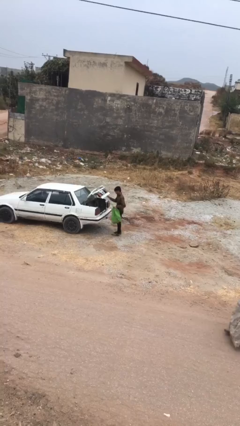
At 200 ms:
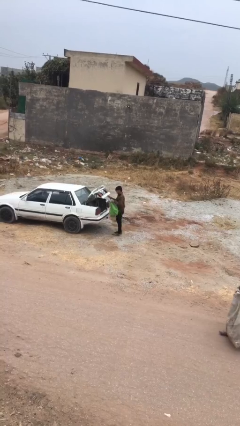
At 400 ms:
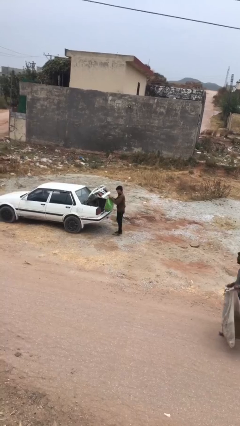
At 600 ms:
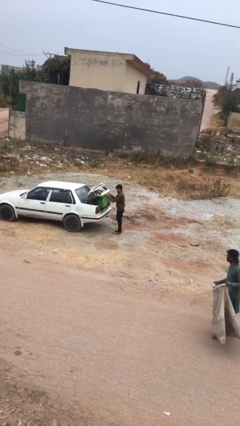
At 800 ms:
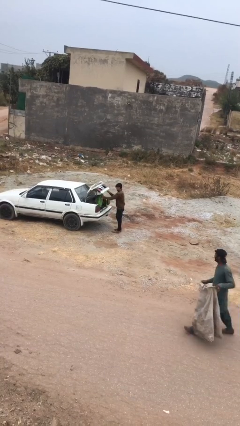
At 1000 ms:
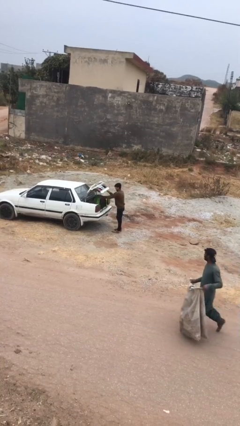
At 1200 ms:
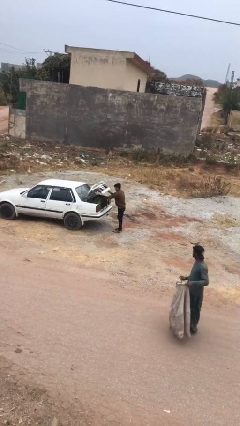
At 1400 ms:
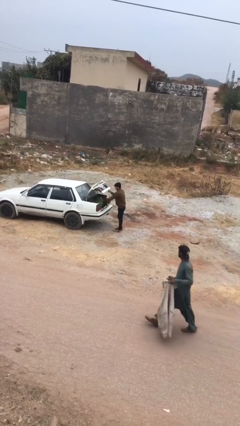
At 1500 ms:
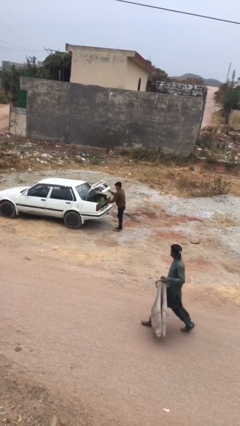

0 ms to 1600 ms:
person loads car

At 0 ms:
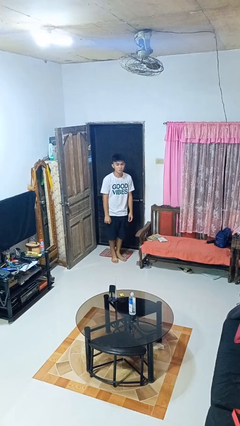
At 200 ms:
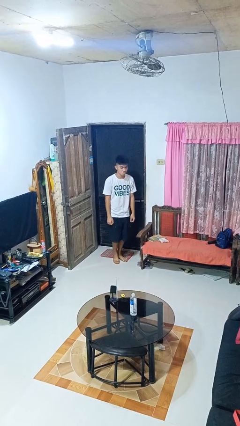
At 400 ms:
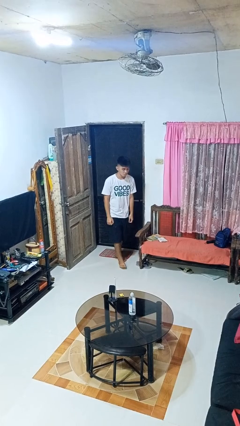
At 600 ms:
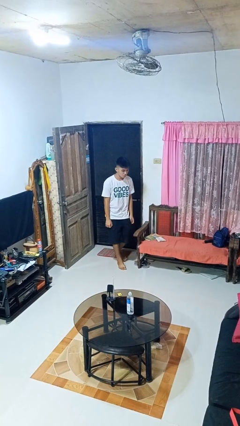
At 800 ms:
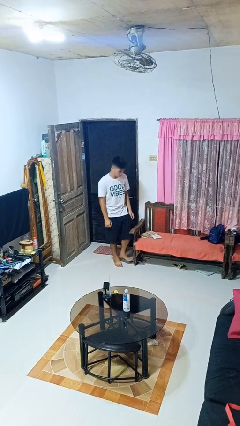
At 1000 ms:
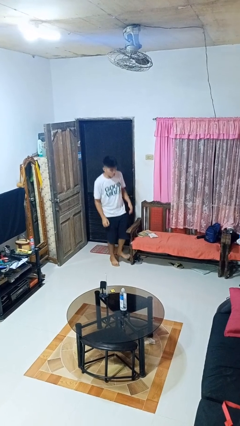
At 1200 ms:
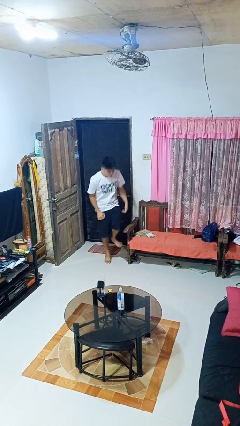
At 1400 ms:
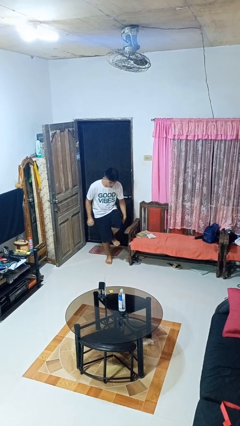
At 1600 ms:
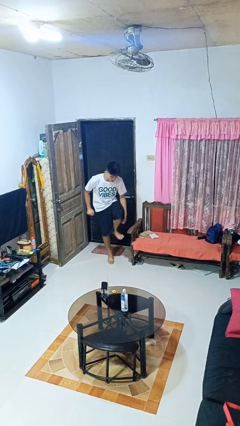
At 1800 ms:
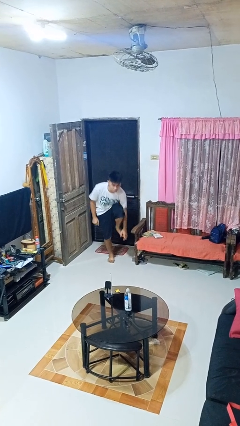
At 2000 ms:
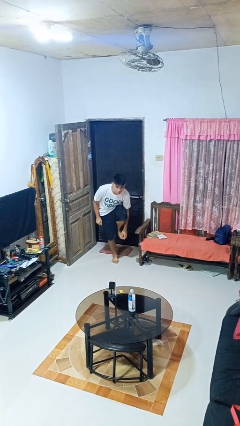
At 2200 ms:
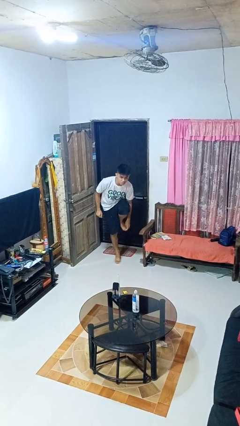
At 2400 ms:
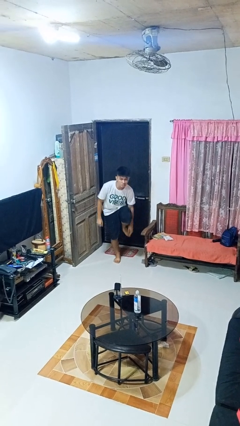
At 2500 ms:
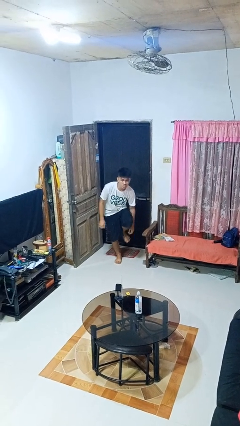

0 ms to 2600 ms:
person stubs toe

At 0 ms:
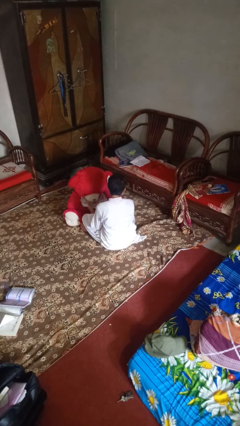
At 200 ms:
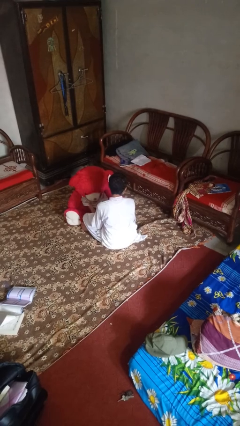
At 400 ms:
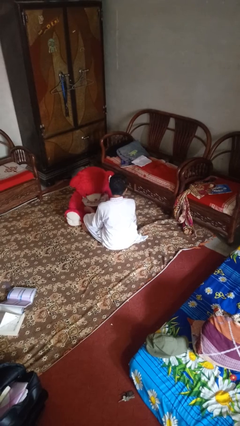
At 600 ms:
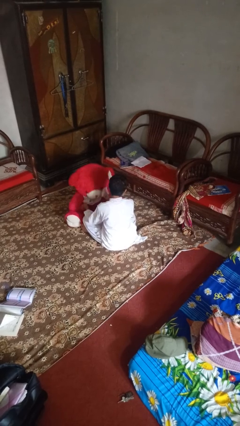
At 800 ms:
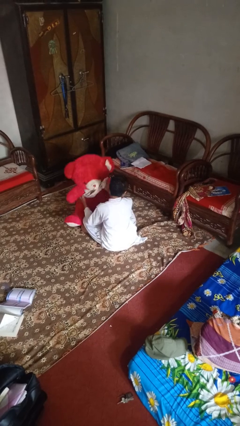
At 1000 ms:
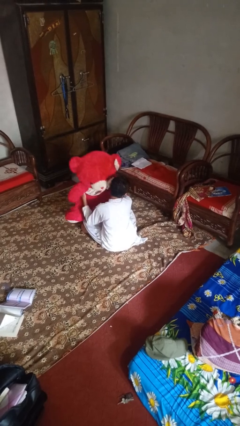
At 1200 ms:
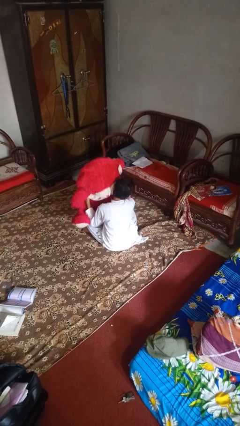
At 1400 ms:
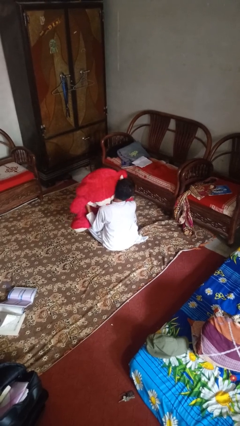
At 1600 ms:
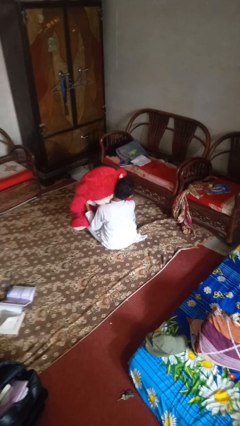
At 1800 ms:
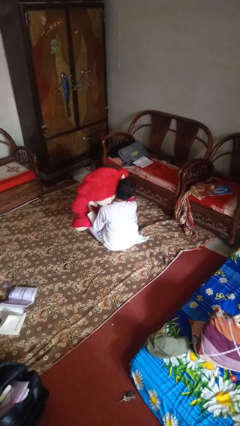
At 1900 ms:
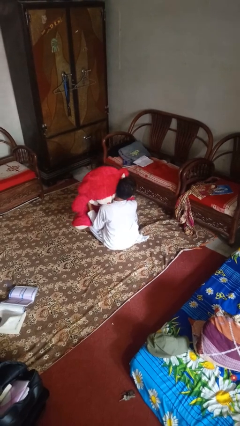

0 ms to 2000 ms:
person hugs stuffed animal

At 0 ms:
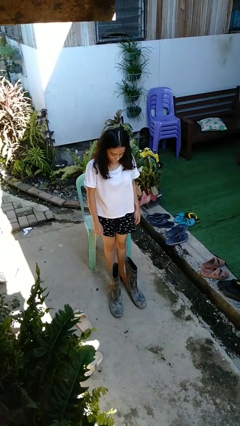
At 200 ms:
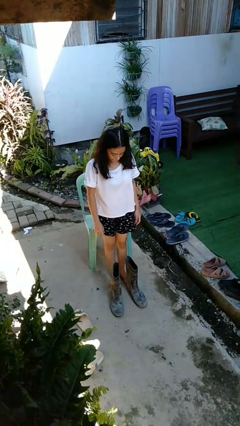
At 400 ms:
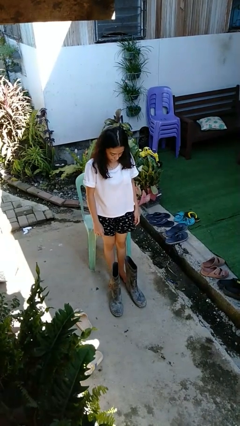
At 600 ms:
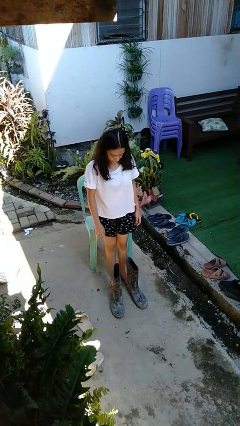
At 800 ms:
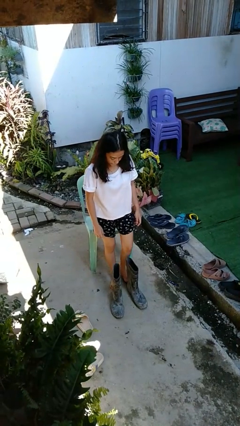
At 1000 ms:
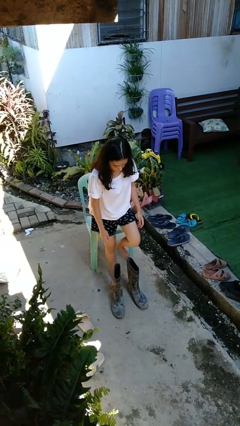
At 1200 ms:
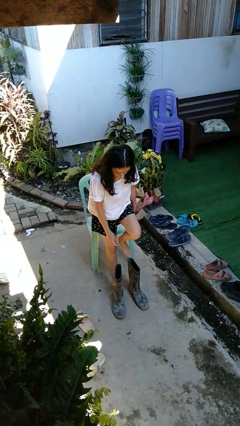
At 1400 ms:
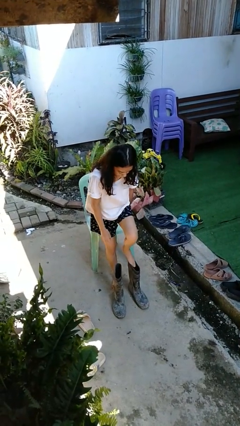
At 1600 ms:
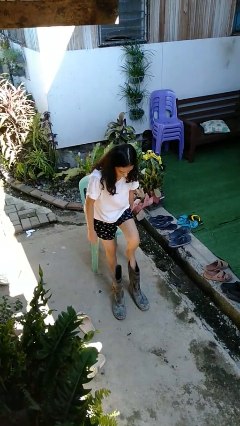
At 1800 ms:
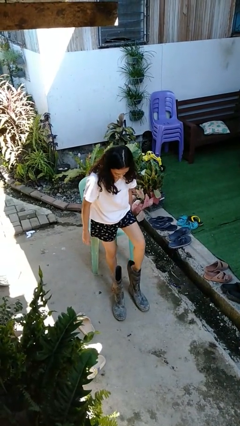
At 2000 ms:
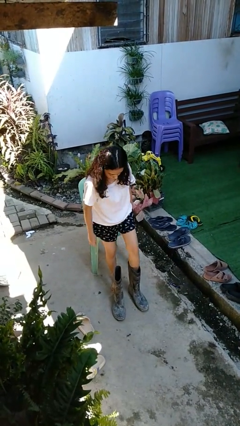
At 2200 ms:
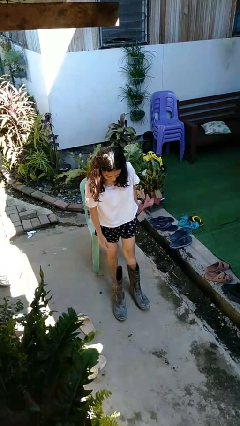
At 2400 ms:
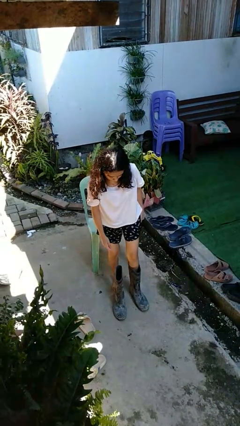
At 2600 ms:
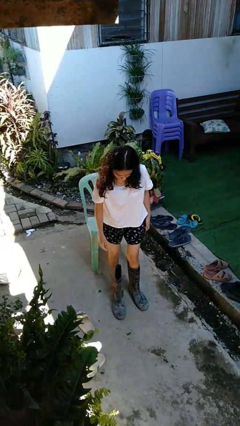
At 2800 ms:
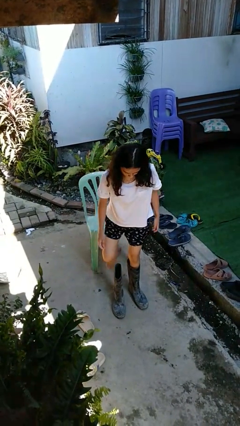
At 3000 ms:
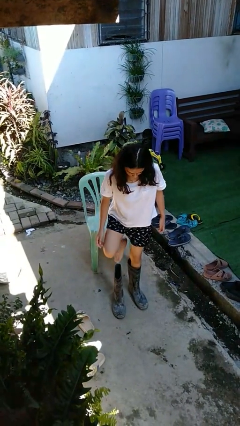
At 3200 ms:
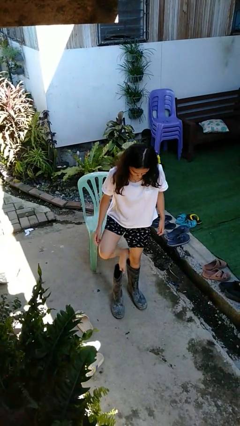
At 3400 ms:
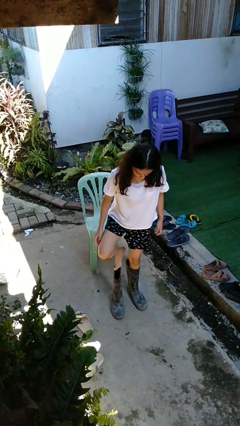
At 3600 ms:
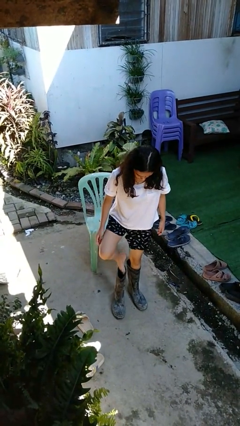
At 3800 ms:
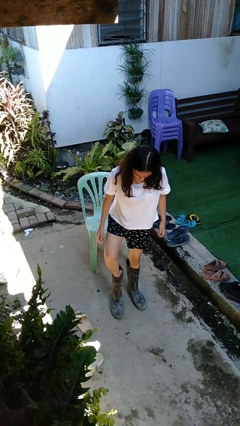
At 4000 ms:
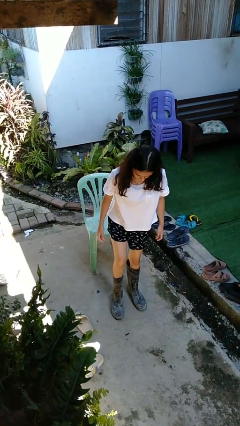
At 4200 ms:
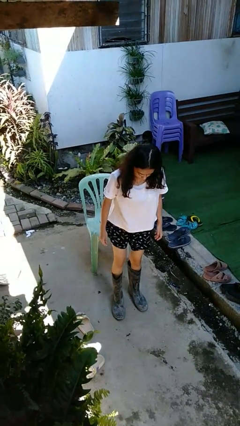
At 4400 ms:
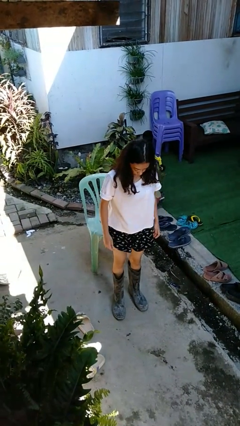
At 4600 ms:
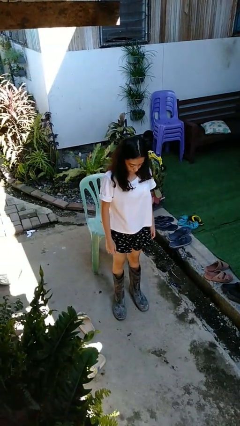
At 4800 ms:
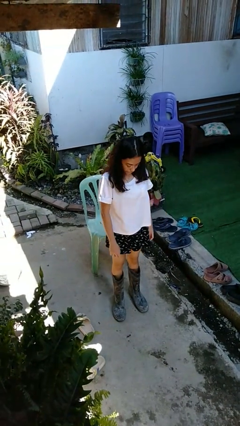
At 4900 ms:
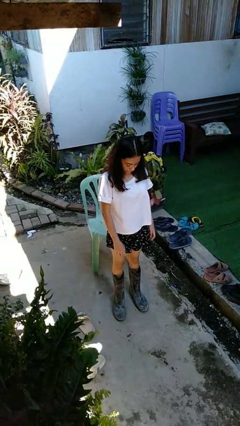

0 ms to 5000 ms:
person puts on boots

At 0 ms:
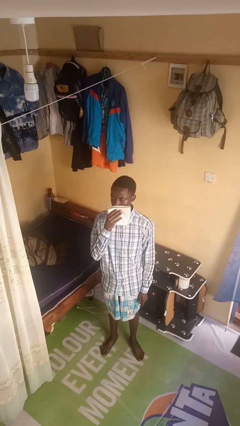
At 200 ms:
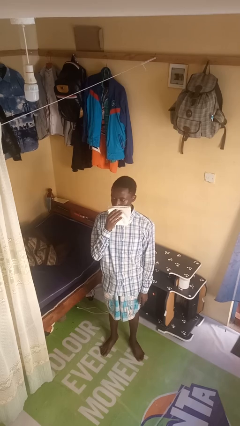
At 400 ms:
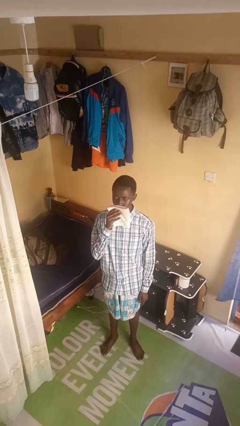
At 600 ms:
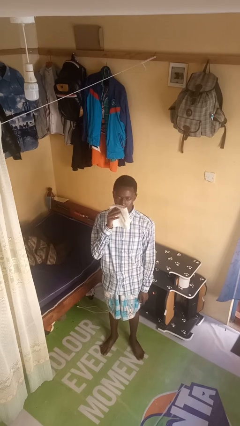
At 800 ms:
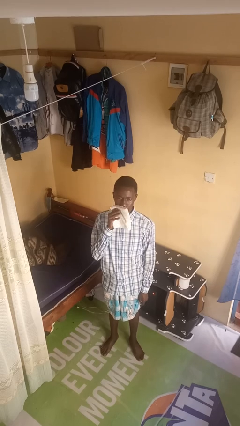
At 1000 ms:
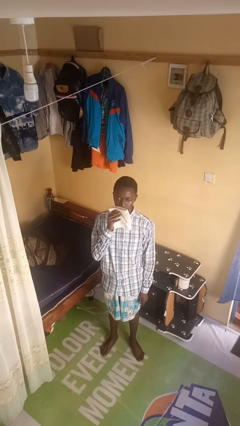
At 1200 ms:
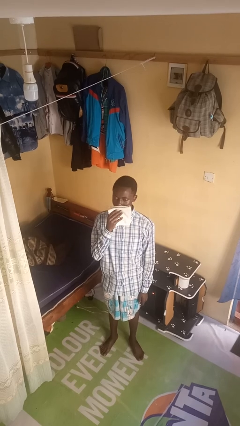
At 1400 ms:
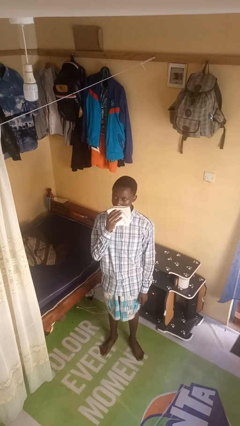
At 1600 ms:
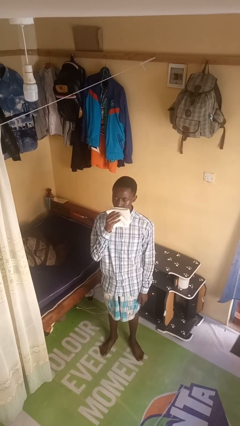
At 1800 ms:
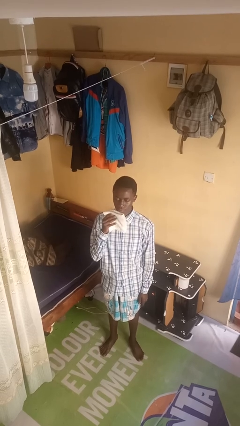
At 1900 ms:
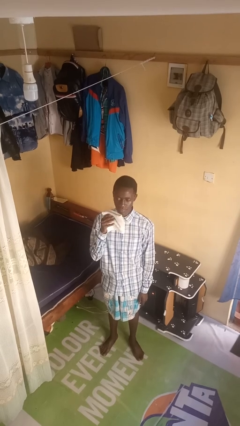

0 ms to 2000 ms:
person wipes mouth with napkin

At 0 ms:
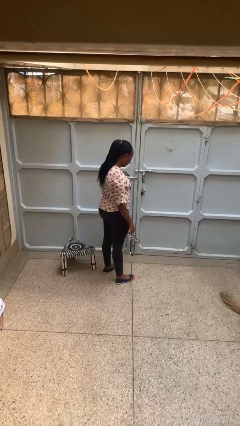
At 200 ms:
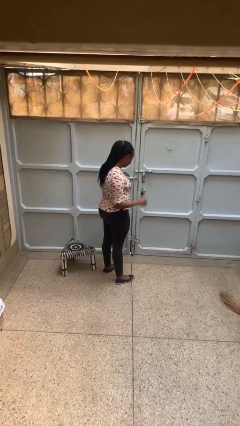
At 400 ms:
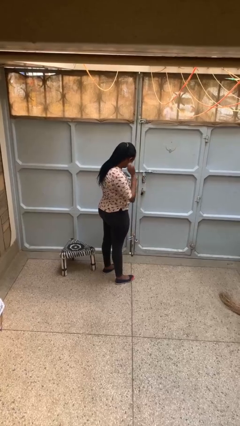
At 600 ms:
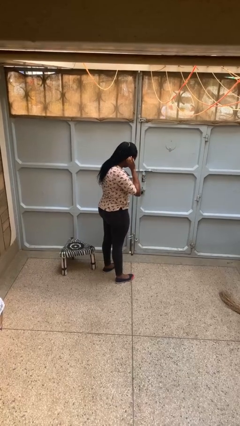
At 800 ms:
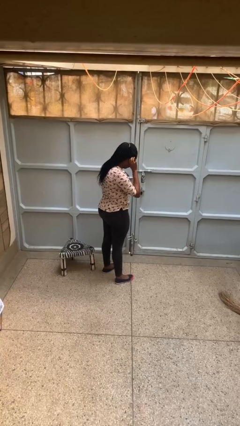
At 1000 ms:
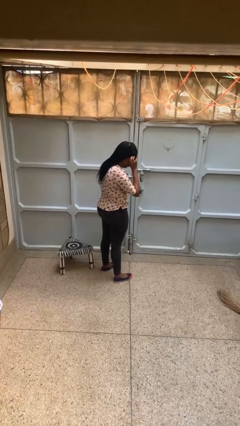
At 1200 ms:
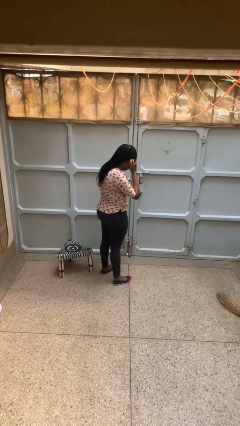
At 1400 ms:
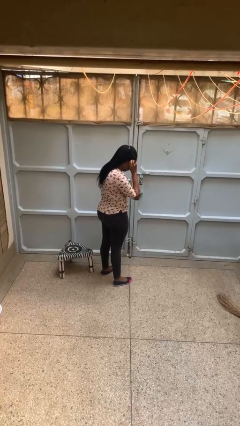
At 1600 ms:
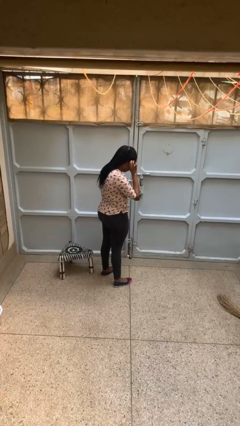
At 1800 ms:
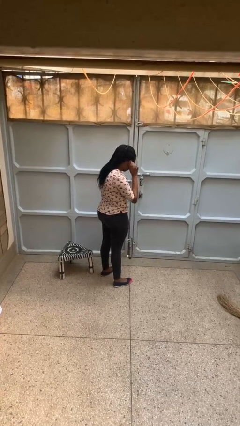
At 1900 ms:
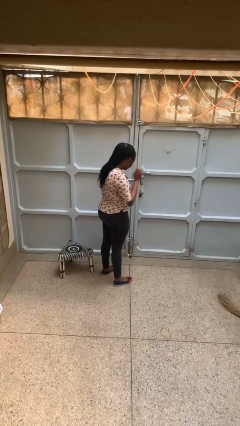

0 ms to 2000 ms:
person gestures listen closely

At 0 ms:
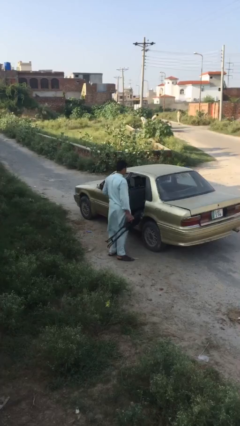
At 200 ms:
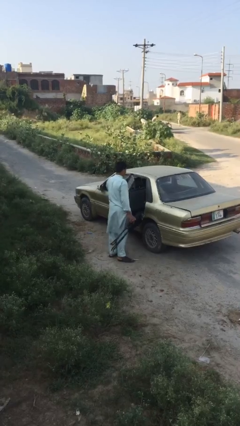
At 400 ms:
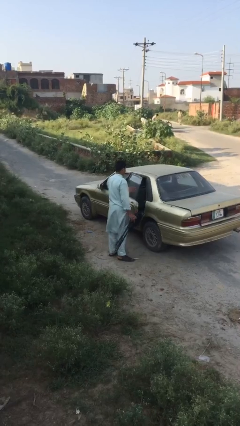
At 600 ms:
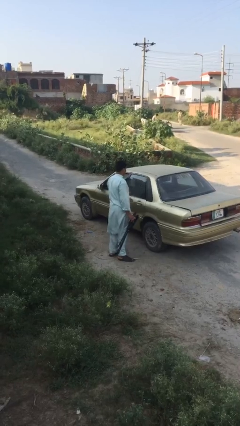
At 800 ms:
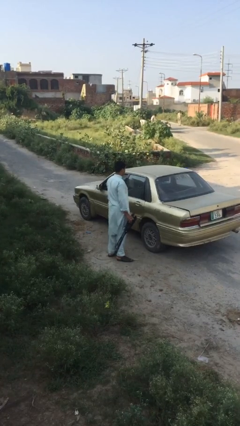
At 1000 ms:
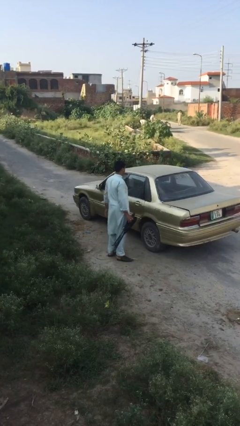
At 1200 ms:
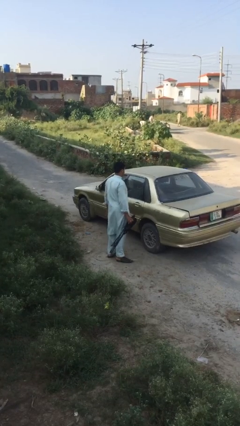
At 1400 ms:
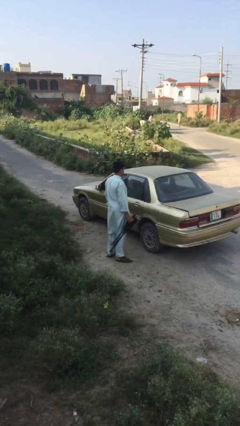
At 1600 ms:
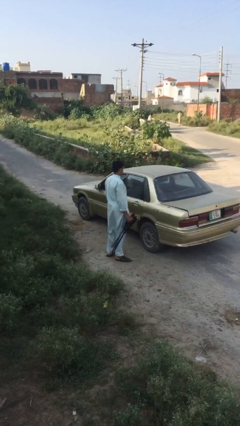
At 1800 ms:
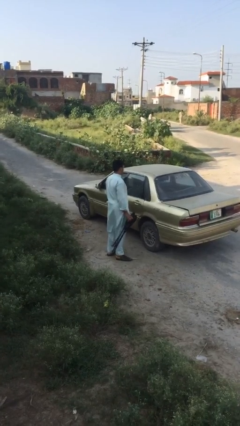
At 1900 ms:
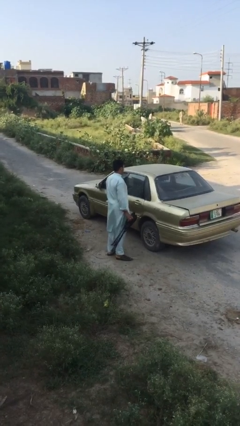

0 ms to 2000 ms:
person closes car door
